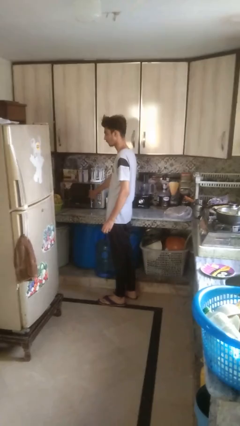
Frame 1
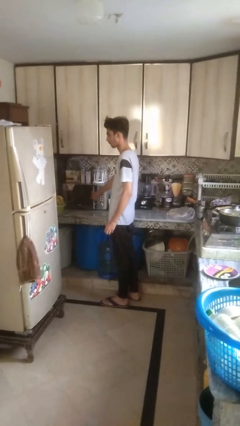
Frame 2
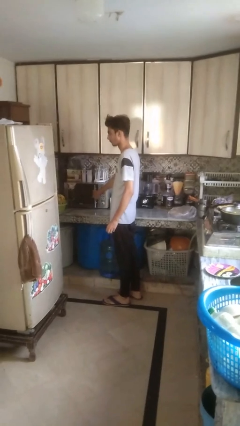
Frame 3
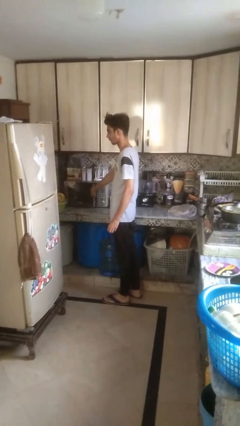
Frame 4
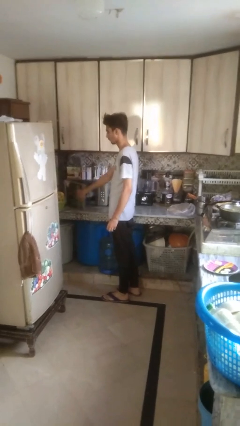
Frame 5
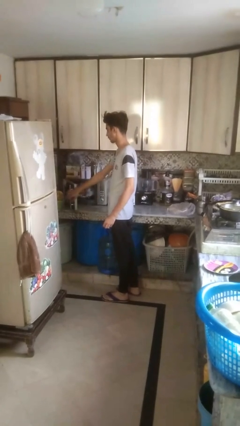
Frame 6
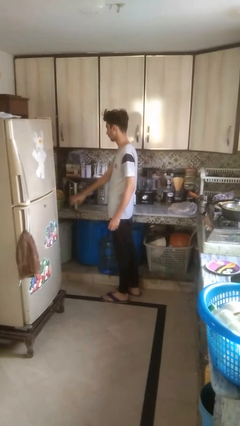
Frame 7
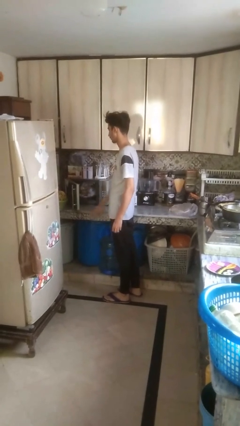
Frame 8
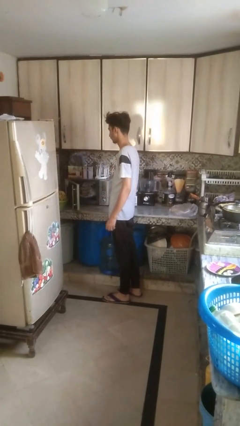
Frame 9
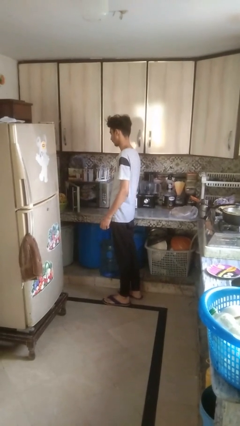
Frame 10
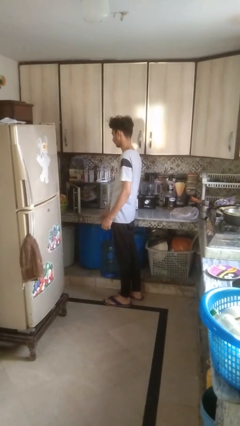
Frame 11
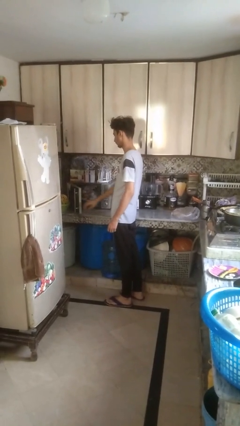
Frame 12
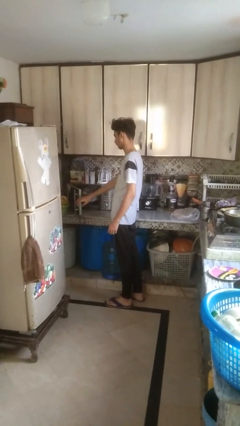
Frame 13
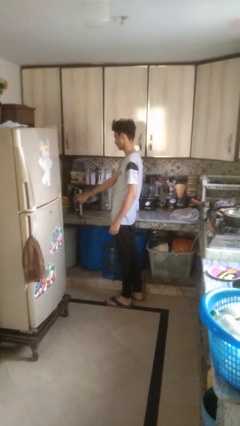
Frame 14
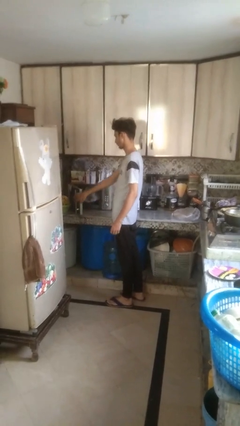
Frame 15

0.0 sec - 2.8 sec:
person opens oven door

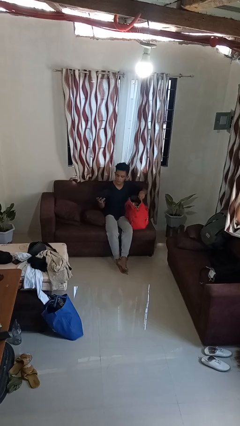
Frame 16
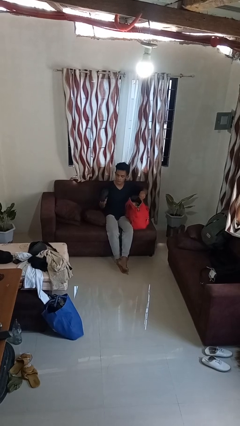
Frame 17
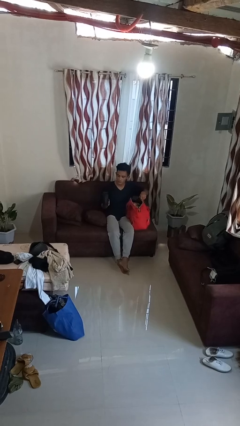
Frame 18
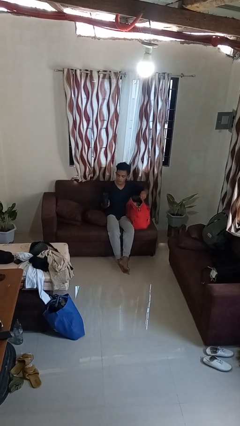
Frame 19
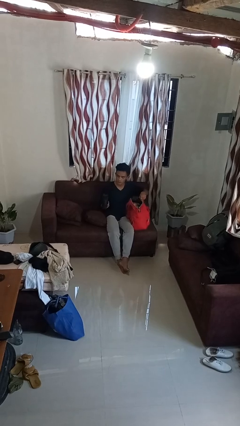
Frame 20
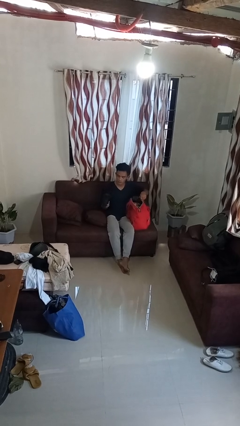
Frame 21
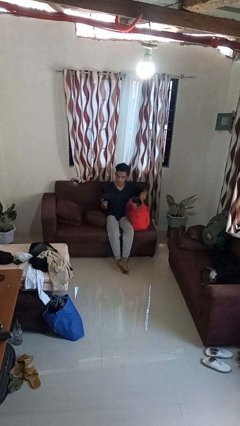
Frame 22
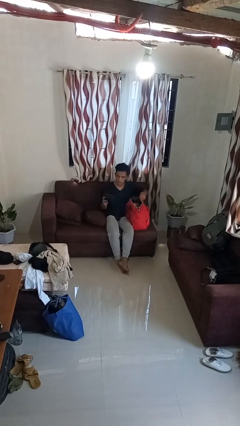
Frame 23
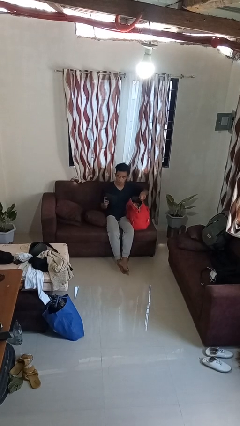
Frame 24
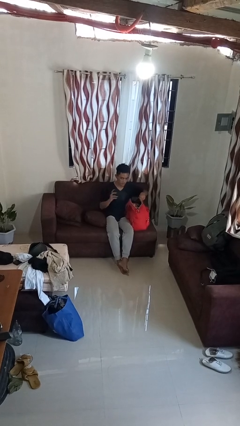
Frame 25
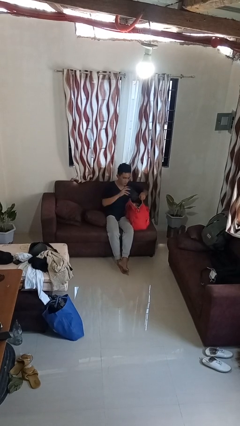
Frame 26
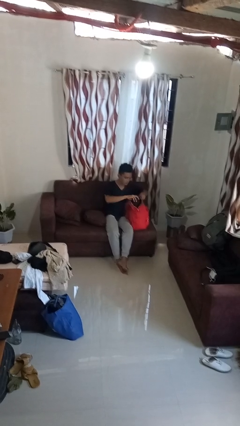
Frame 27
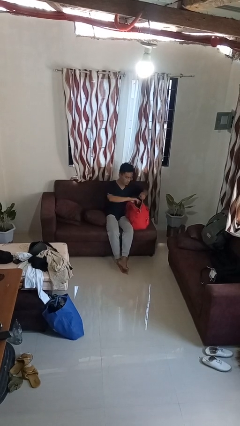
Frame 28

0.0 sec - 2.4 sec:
person takes object from backpack

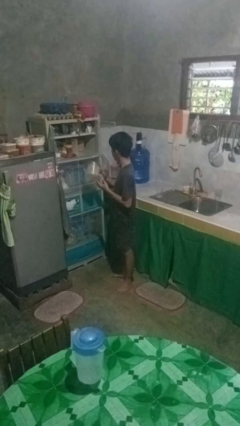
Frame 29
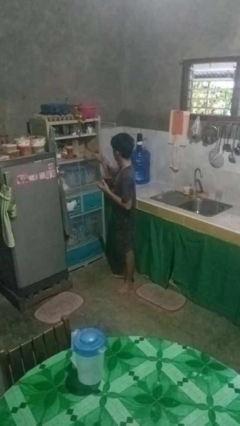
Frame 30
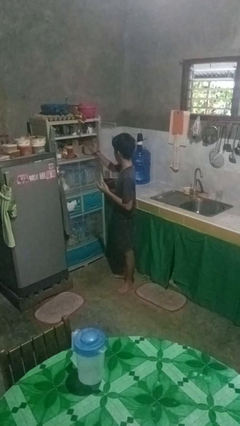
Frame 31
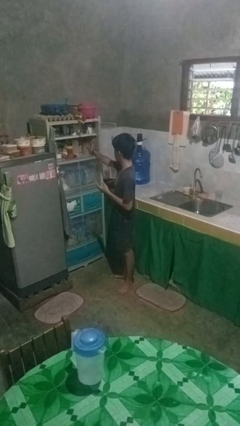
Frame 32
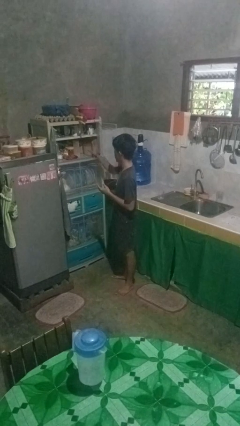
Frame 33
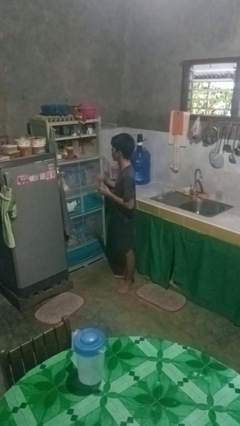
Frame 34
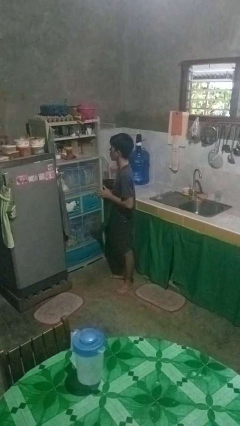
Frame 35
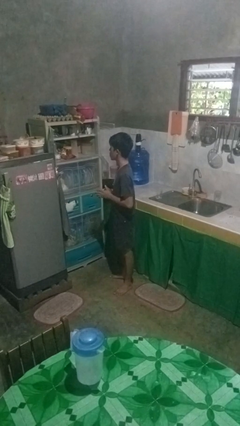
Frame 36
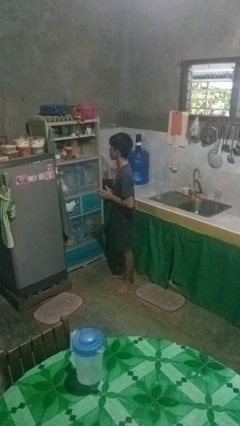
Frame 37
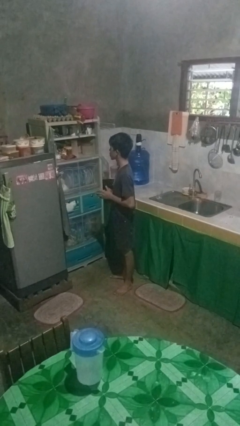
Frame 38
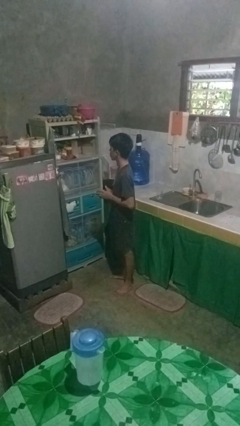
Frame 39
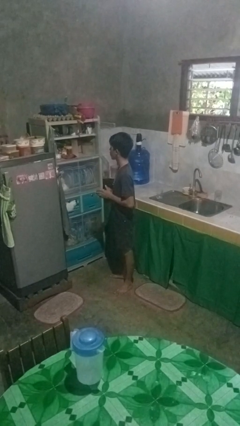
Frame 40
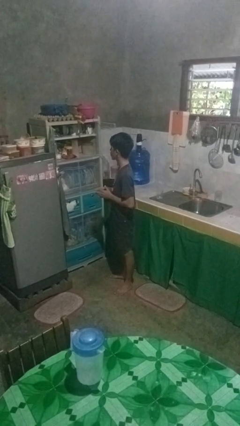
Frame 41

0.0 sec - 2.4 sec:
person puts object in cabinet

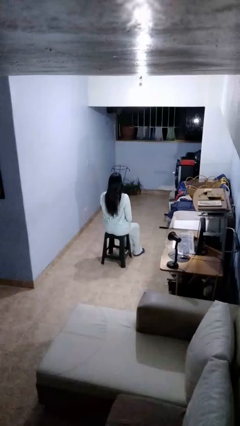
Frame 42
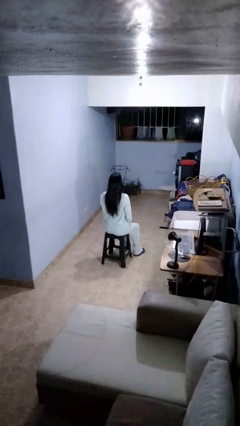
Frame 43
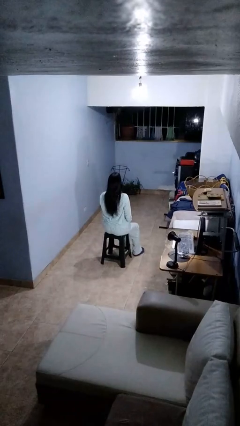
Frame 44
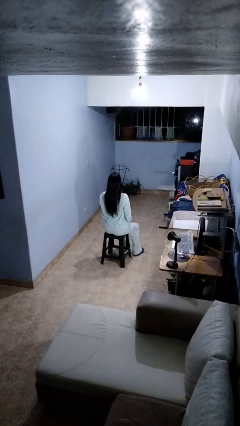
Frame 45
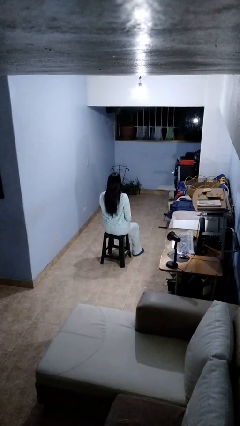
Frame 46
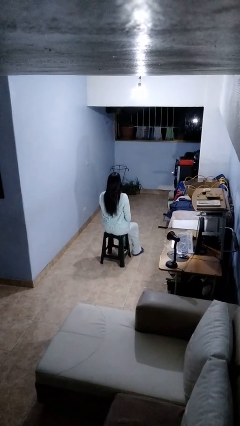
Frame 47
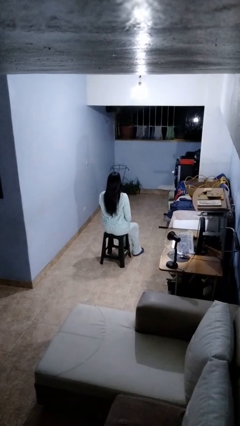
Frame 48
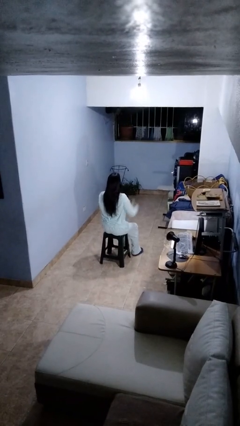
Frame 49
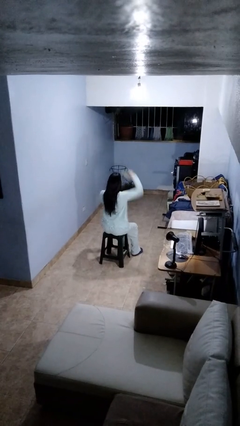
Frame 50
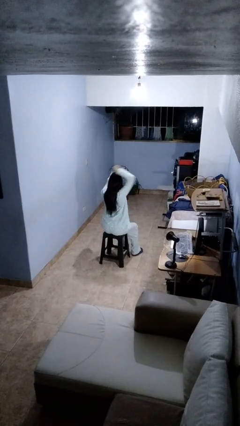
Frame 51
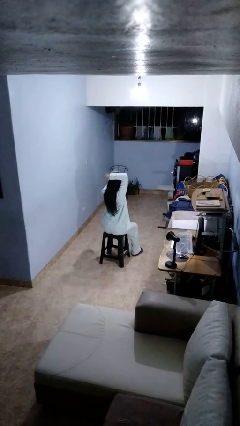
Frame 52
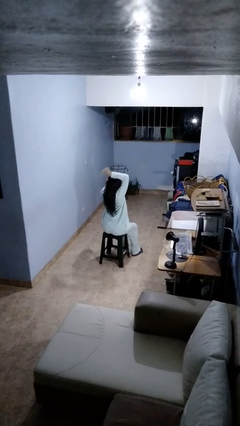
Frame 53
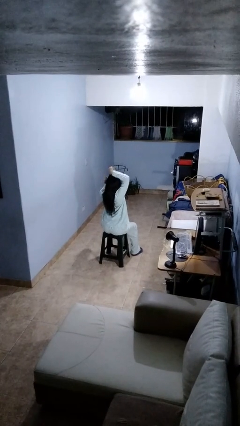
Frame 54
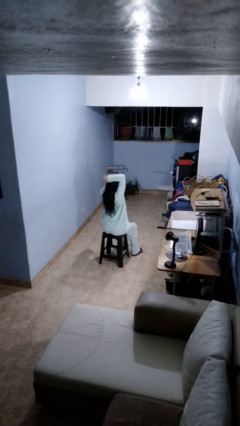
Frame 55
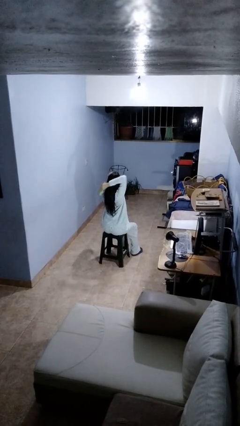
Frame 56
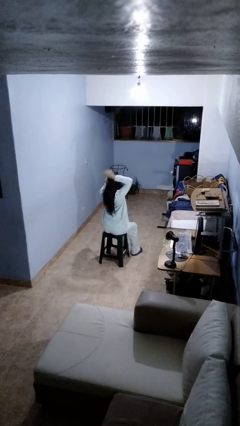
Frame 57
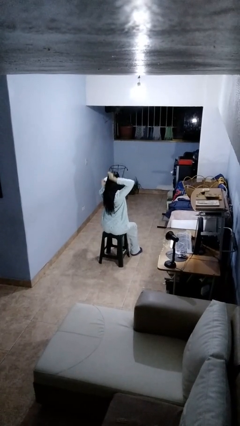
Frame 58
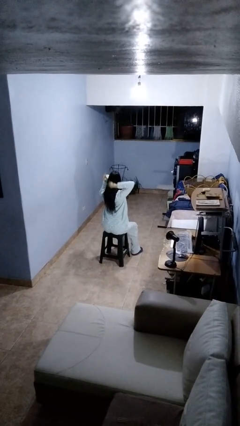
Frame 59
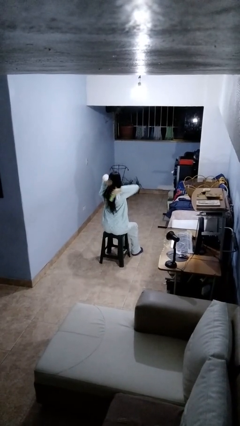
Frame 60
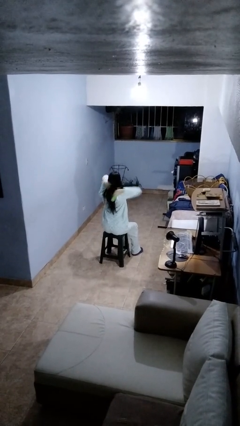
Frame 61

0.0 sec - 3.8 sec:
person brushes hair

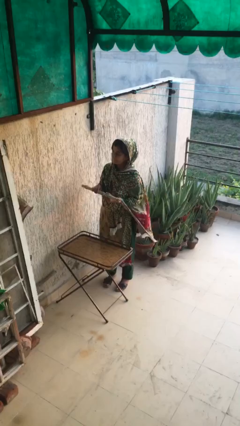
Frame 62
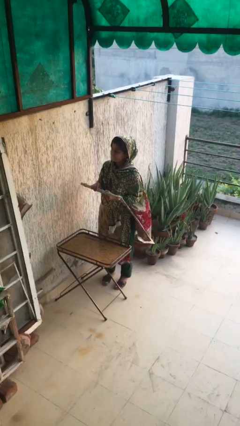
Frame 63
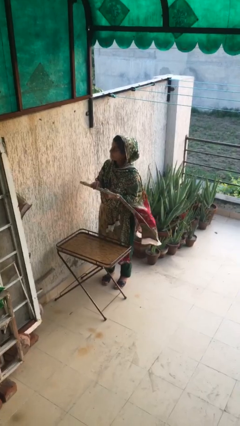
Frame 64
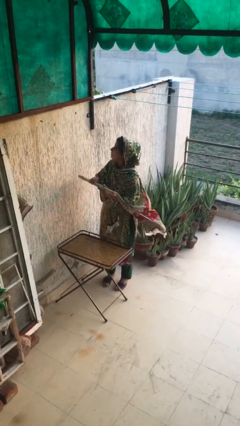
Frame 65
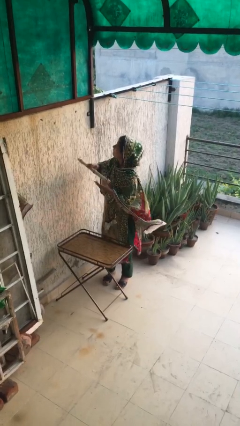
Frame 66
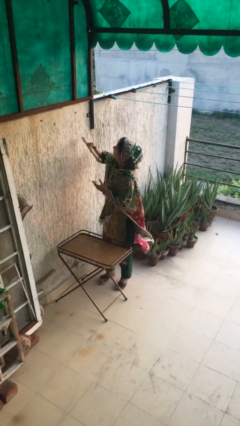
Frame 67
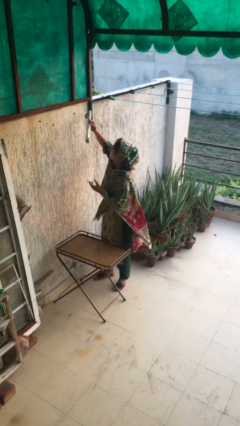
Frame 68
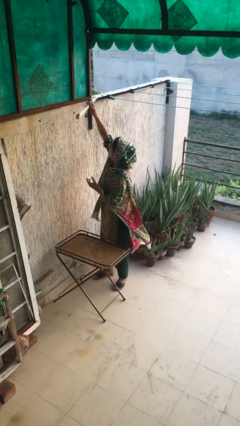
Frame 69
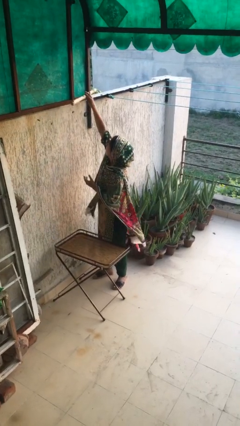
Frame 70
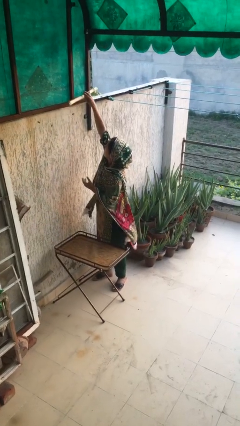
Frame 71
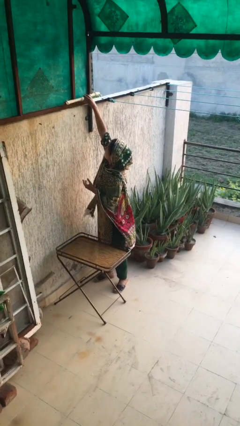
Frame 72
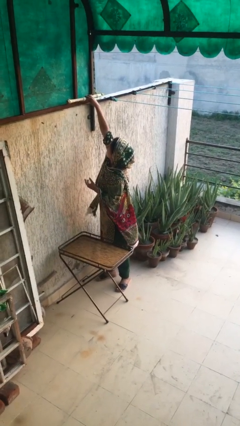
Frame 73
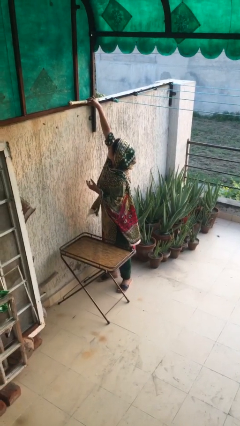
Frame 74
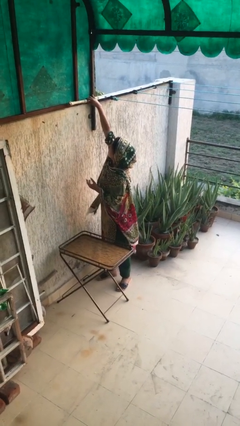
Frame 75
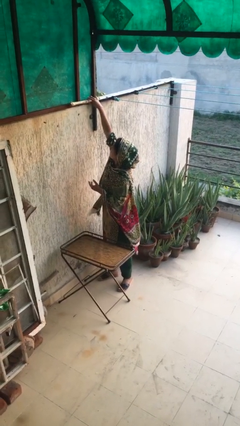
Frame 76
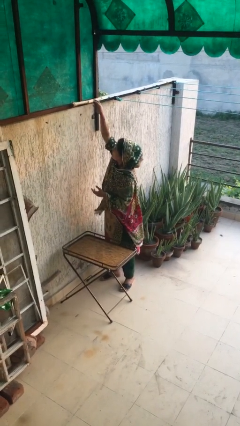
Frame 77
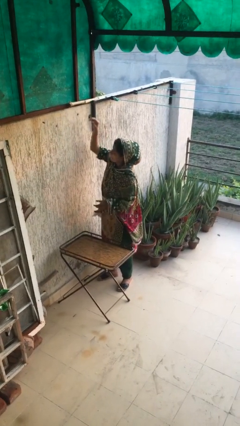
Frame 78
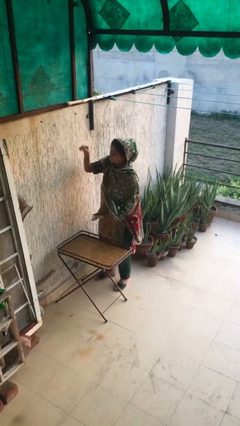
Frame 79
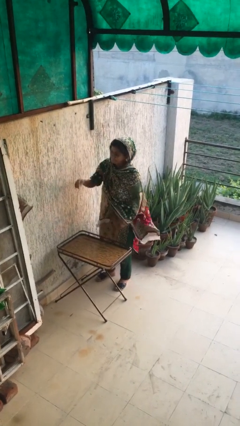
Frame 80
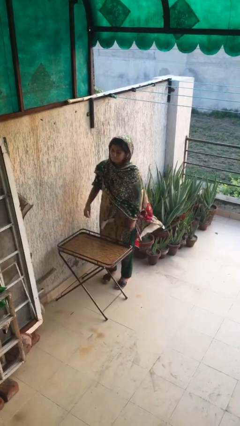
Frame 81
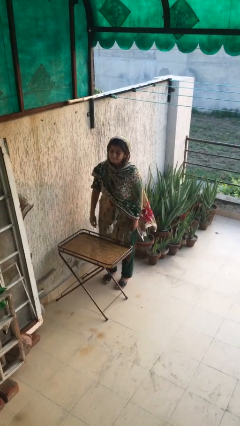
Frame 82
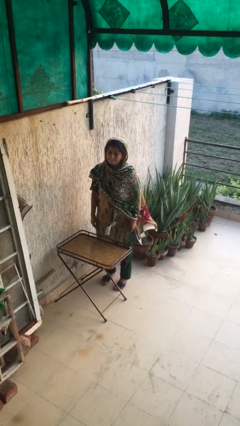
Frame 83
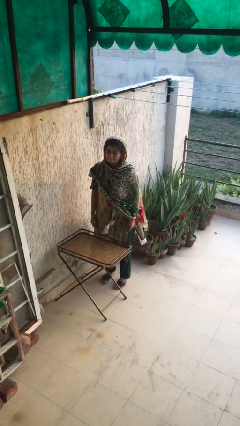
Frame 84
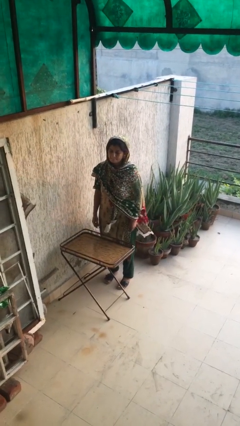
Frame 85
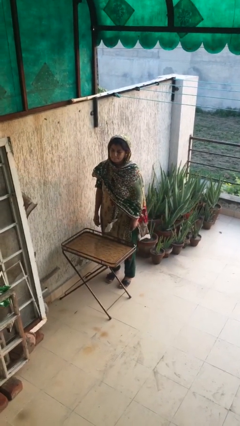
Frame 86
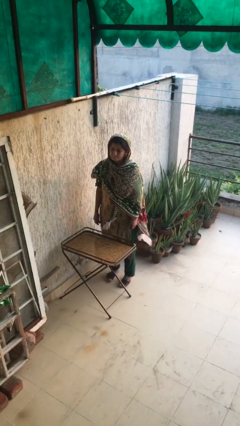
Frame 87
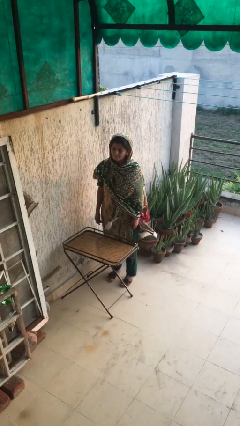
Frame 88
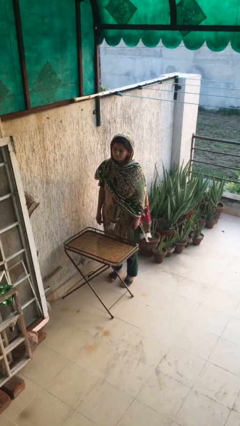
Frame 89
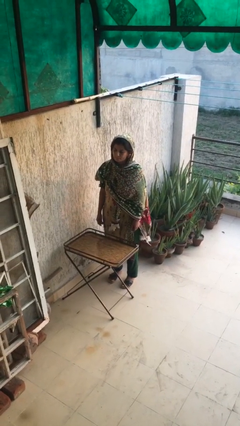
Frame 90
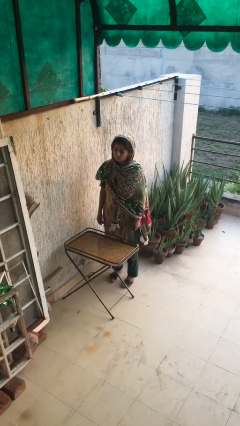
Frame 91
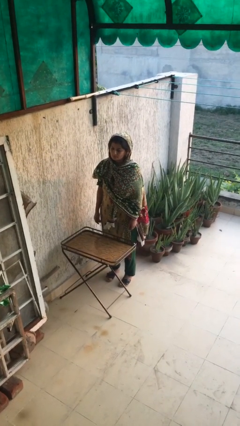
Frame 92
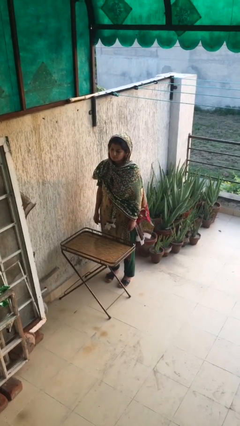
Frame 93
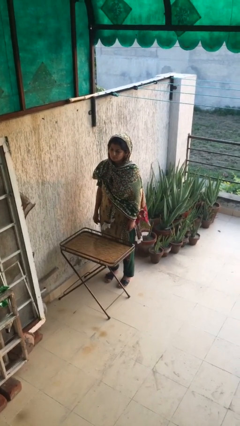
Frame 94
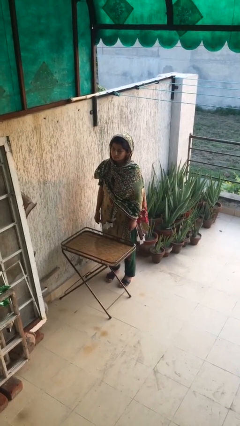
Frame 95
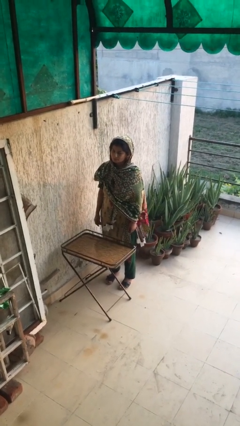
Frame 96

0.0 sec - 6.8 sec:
person puts down object on shelf
